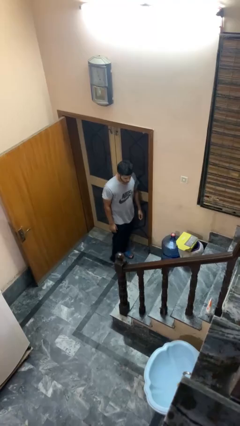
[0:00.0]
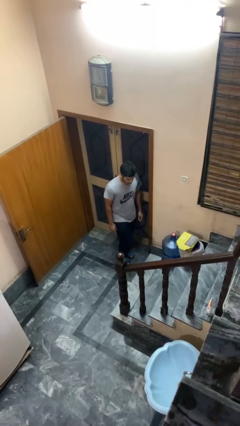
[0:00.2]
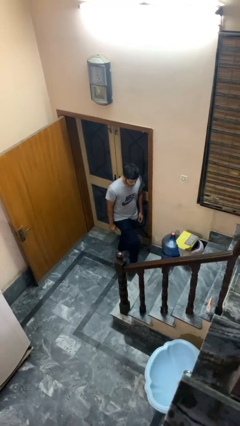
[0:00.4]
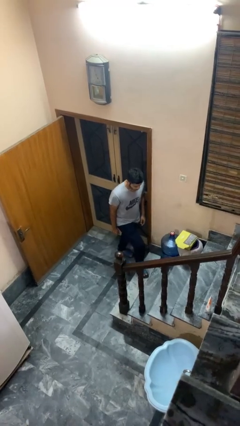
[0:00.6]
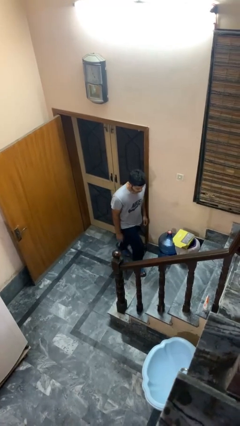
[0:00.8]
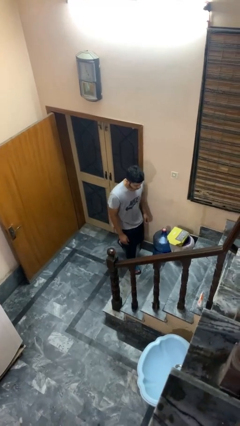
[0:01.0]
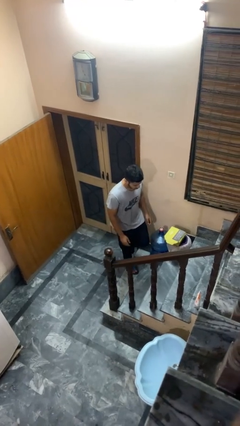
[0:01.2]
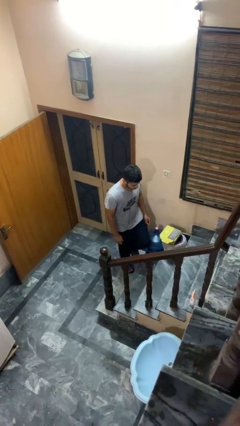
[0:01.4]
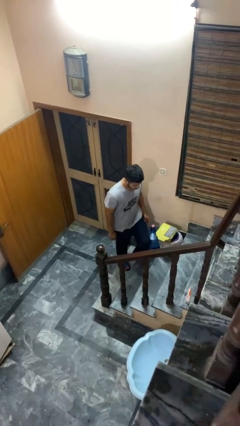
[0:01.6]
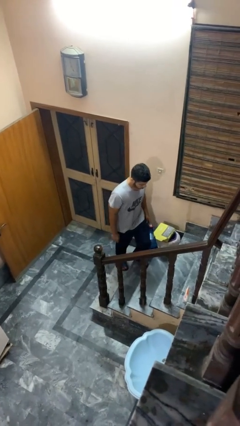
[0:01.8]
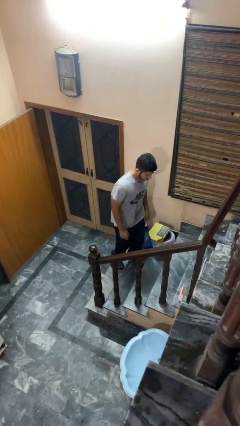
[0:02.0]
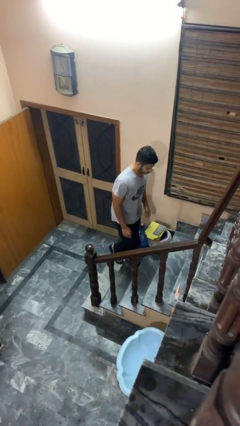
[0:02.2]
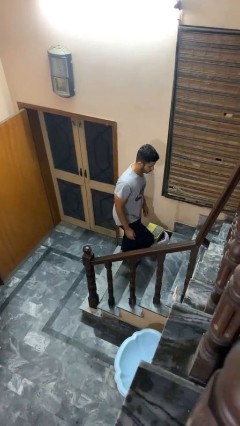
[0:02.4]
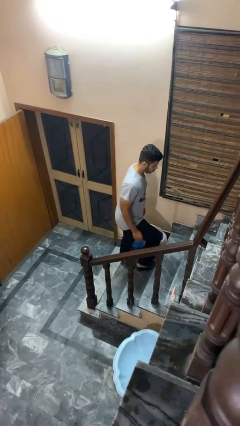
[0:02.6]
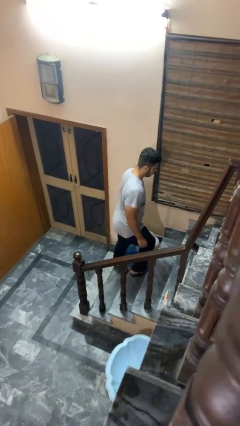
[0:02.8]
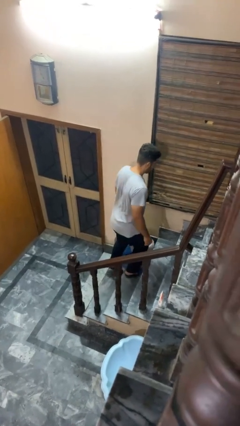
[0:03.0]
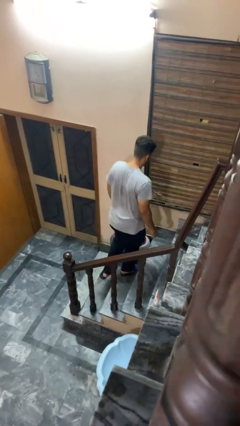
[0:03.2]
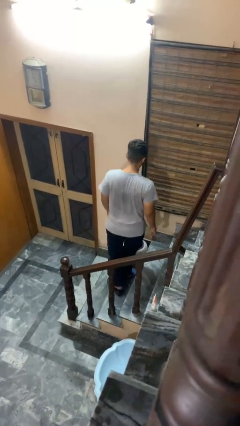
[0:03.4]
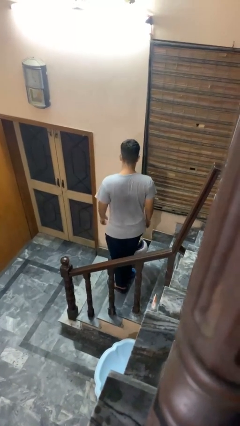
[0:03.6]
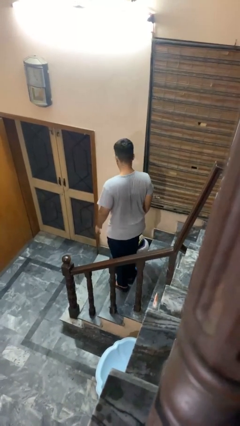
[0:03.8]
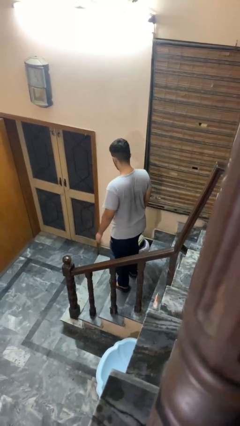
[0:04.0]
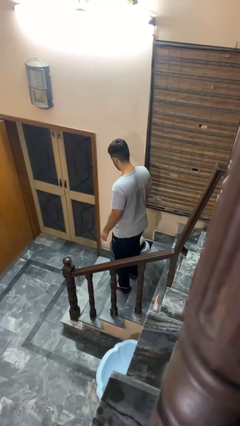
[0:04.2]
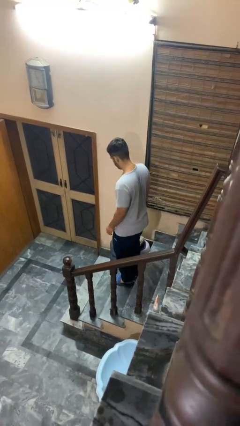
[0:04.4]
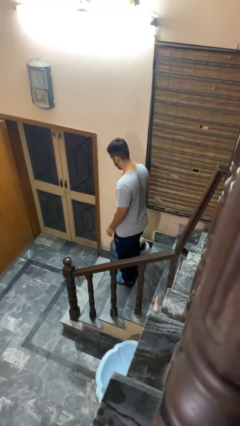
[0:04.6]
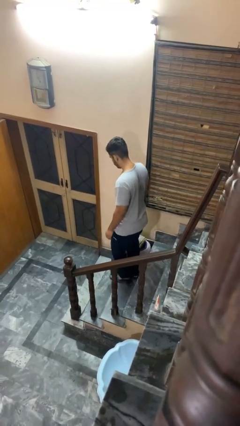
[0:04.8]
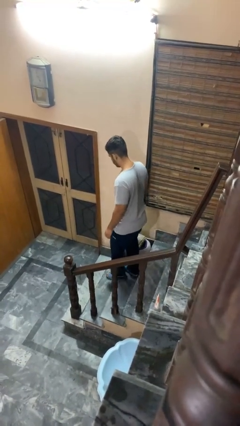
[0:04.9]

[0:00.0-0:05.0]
person climbs up stairs

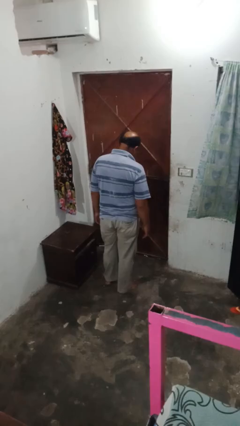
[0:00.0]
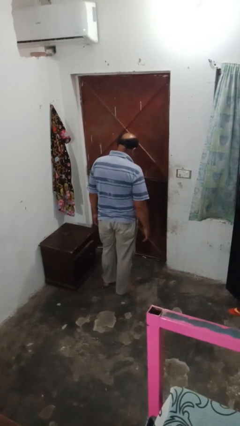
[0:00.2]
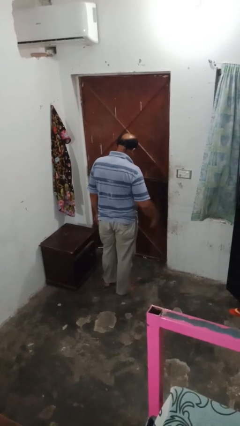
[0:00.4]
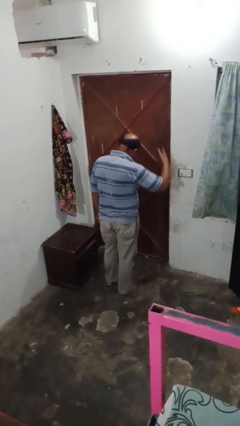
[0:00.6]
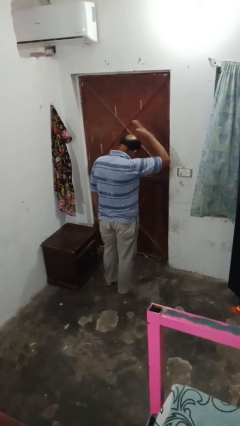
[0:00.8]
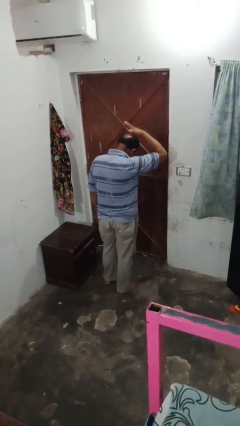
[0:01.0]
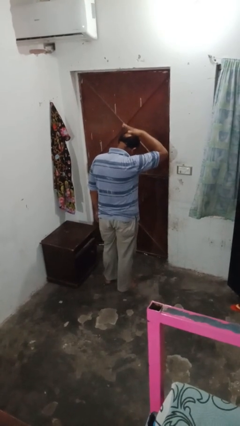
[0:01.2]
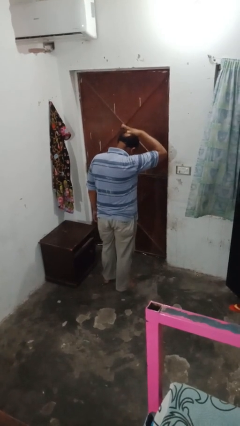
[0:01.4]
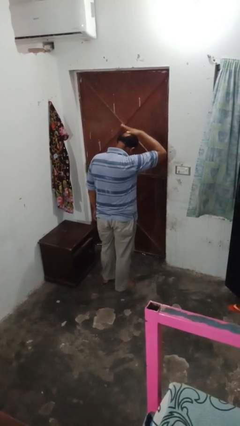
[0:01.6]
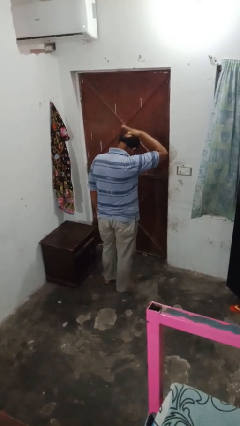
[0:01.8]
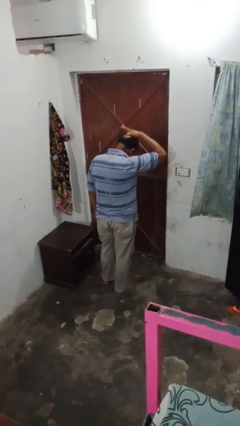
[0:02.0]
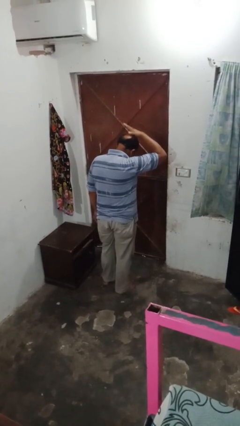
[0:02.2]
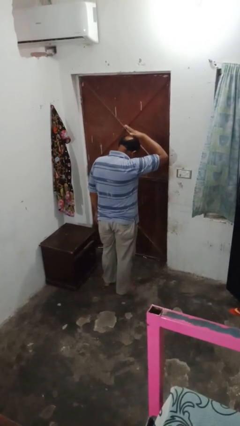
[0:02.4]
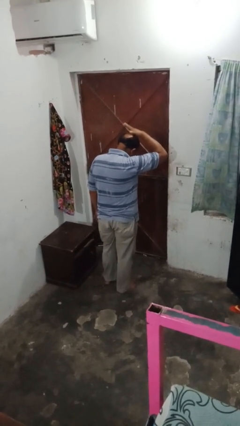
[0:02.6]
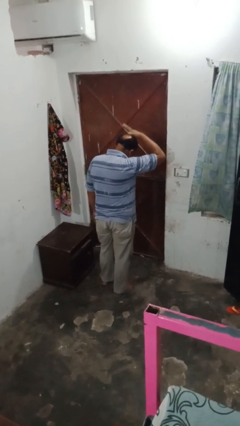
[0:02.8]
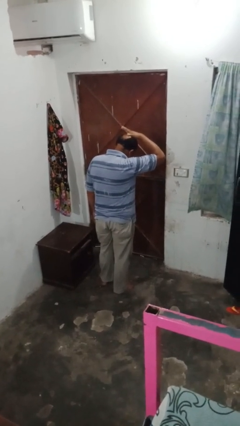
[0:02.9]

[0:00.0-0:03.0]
person pats head

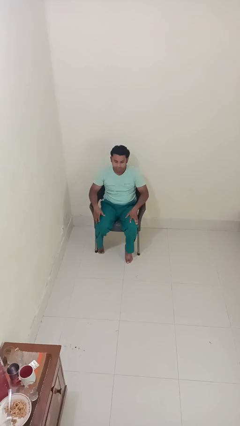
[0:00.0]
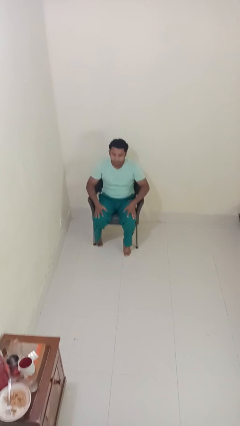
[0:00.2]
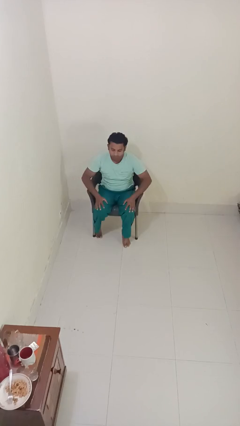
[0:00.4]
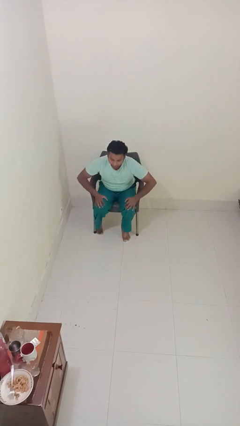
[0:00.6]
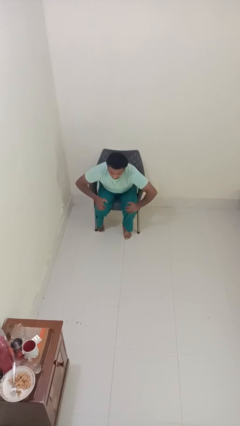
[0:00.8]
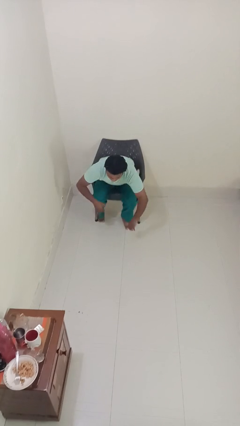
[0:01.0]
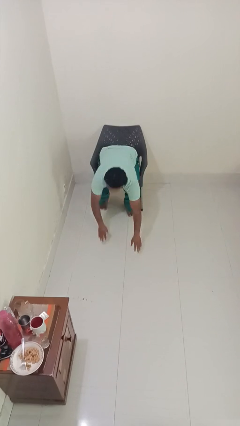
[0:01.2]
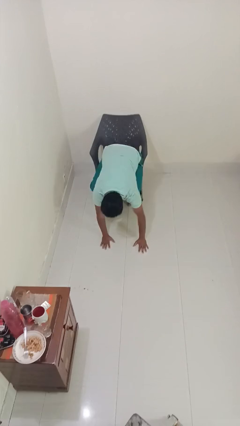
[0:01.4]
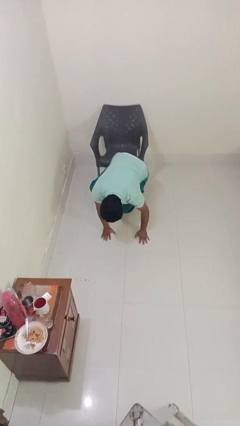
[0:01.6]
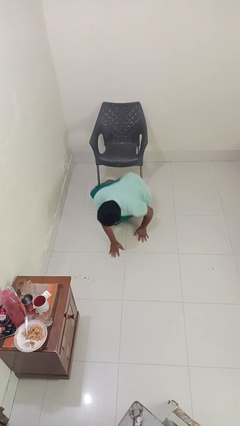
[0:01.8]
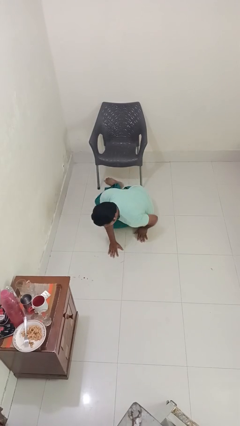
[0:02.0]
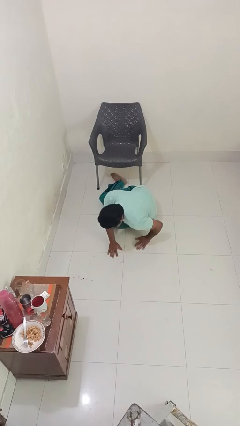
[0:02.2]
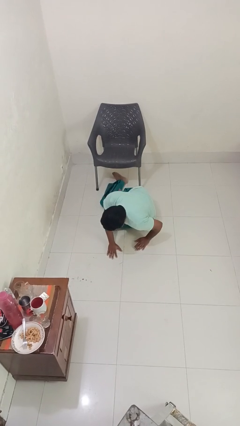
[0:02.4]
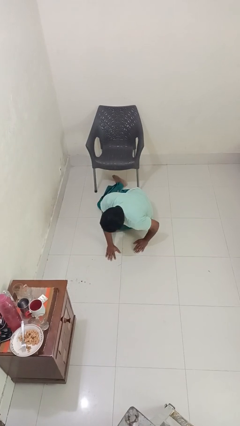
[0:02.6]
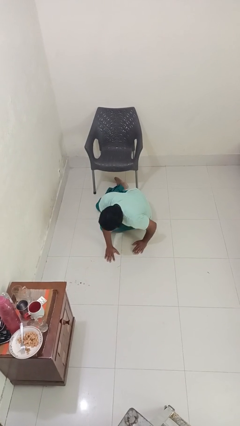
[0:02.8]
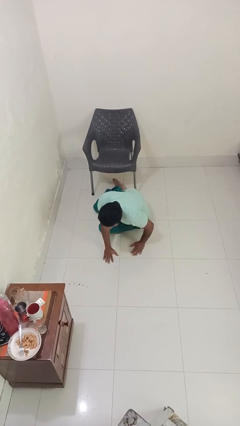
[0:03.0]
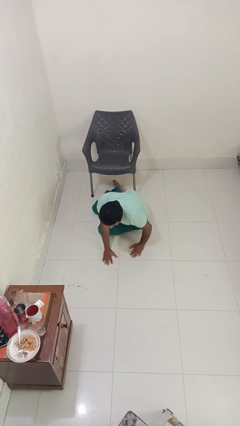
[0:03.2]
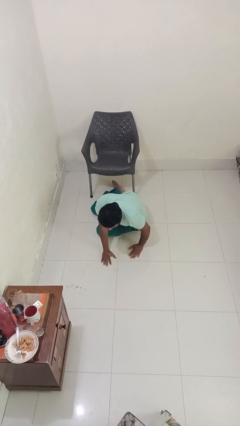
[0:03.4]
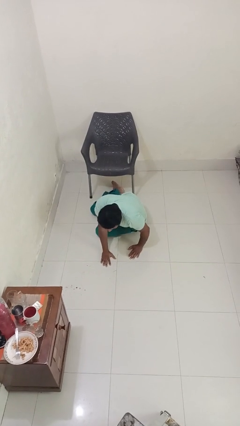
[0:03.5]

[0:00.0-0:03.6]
person falls from chair

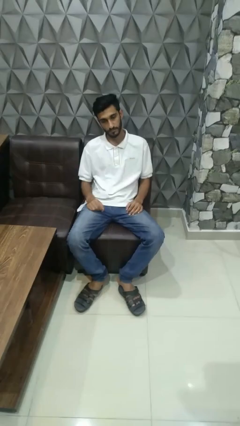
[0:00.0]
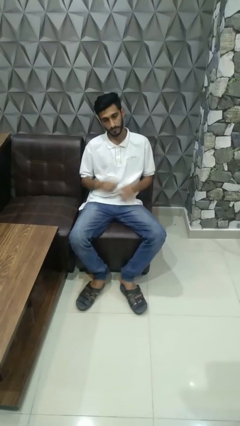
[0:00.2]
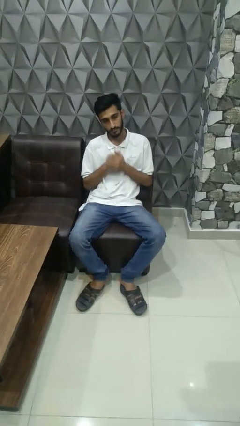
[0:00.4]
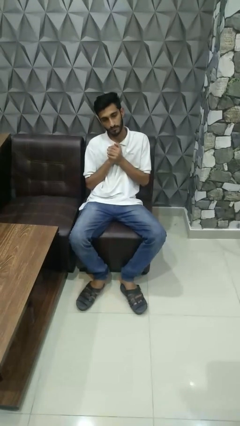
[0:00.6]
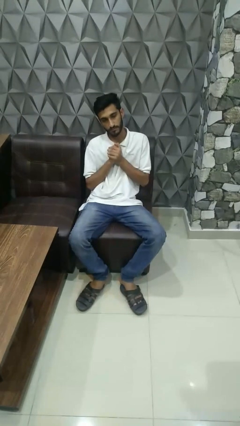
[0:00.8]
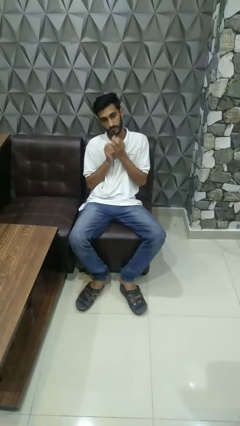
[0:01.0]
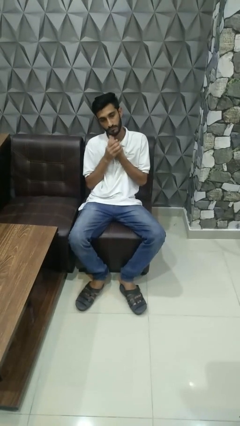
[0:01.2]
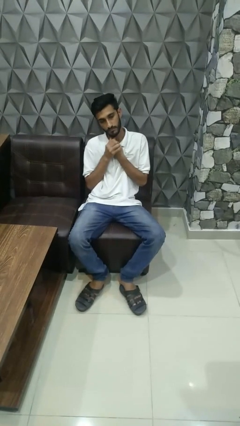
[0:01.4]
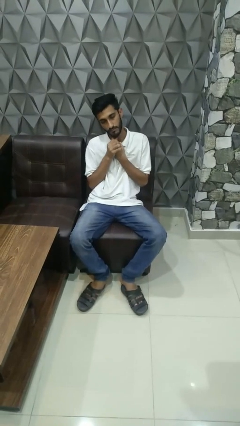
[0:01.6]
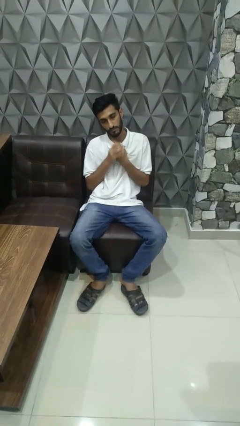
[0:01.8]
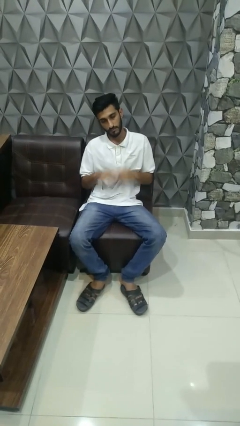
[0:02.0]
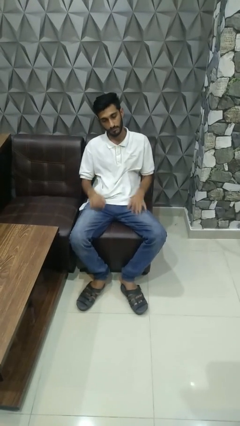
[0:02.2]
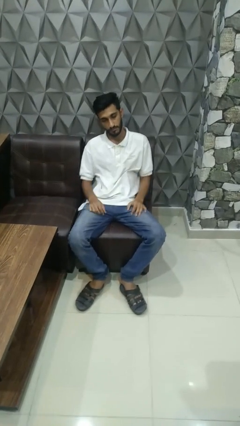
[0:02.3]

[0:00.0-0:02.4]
person cracks knuckles

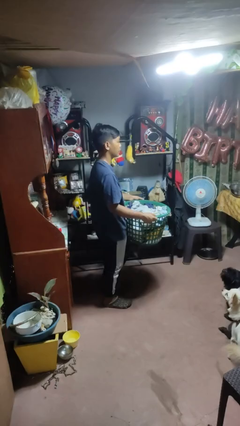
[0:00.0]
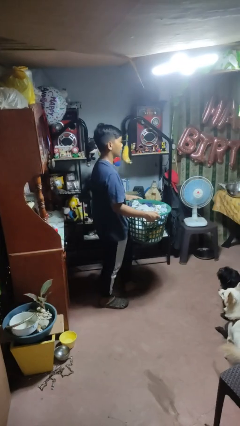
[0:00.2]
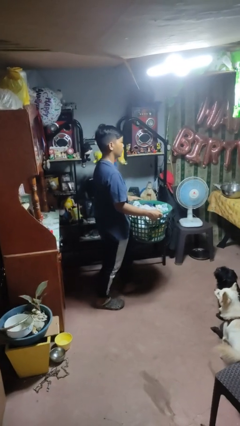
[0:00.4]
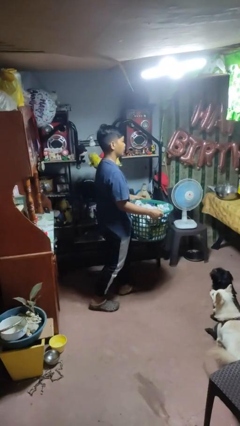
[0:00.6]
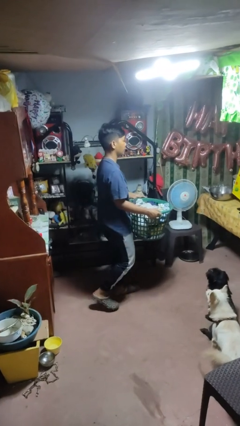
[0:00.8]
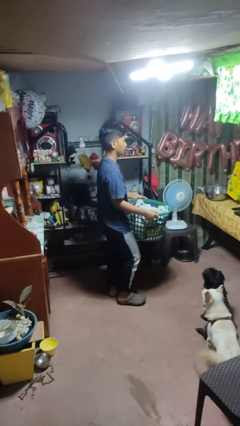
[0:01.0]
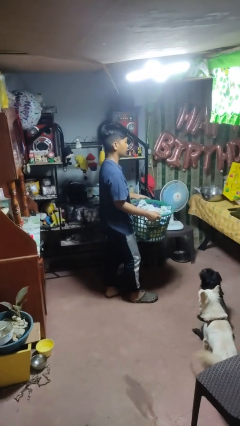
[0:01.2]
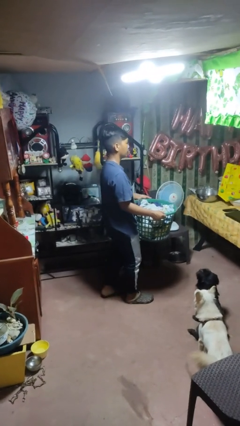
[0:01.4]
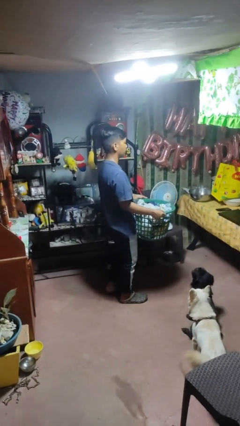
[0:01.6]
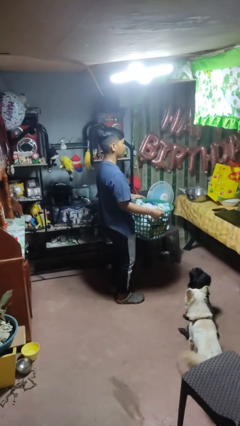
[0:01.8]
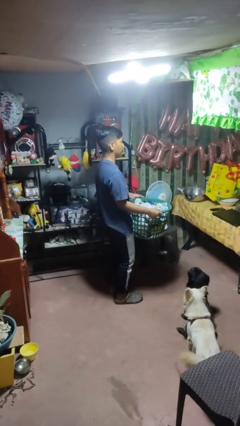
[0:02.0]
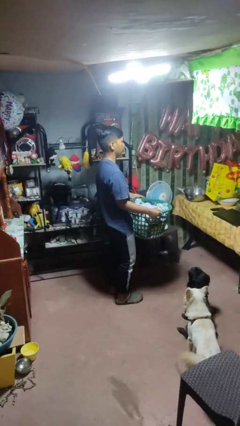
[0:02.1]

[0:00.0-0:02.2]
person carries laundry basket

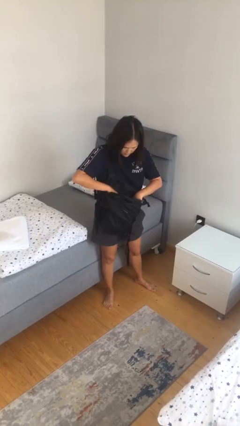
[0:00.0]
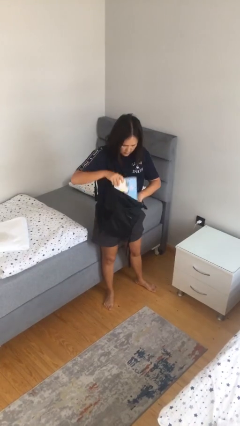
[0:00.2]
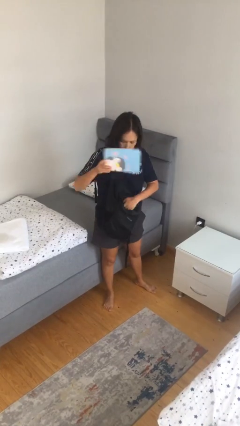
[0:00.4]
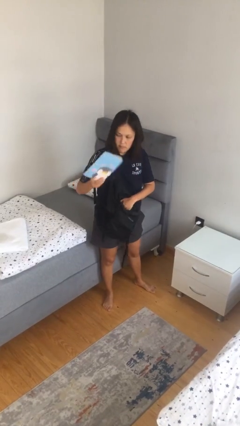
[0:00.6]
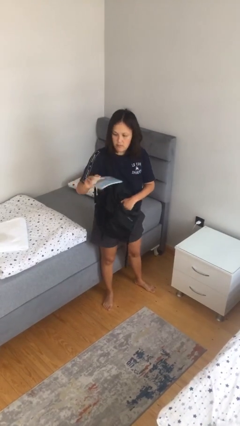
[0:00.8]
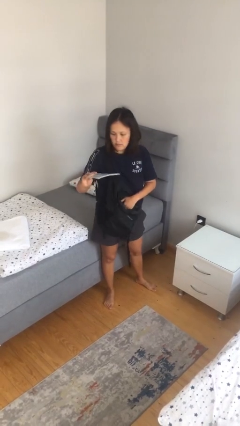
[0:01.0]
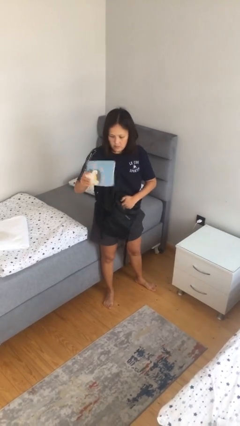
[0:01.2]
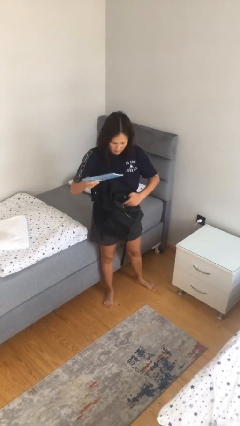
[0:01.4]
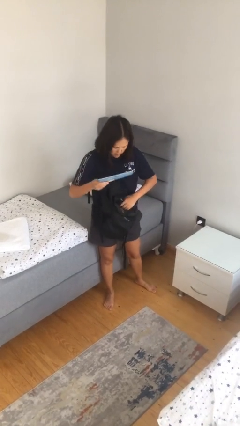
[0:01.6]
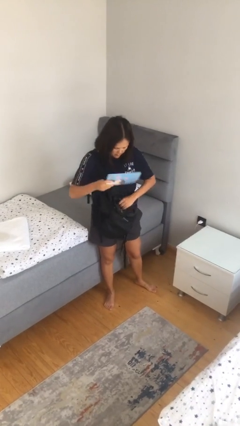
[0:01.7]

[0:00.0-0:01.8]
person takes object from backpack
